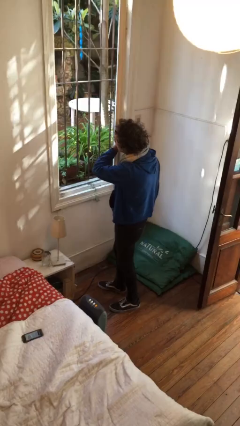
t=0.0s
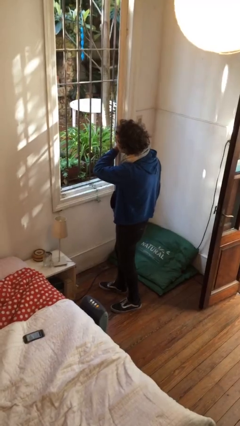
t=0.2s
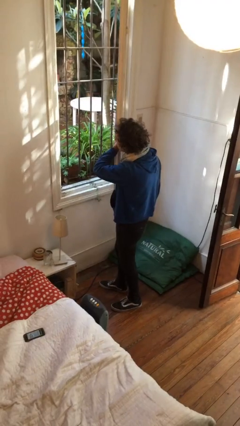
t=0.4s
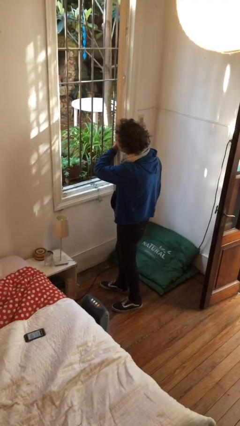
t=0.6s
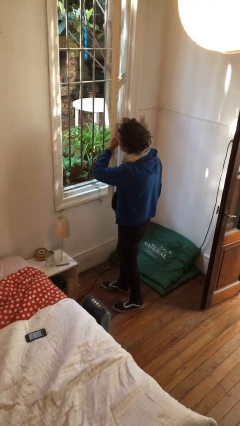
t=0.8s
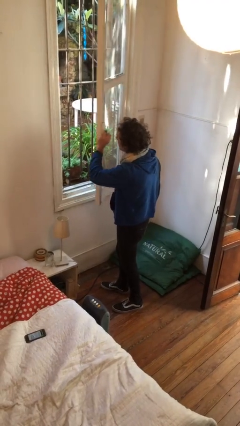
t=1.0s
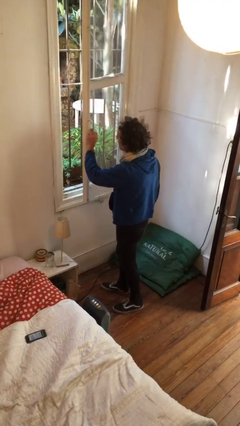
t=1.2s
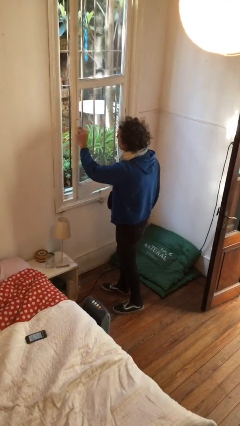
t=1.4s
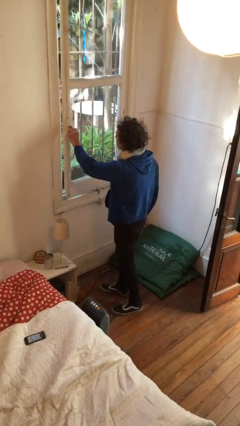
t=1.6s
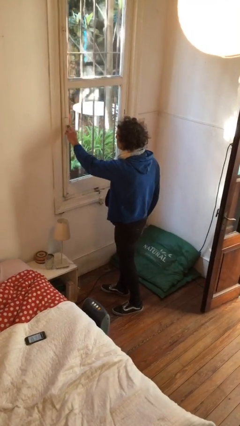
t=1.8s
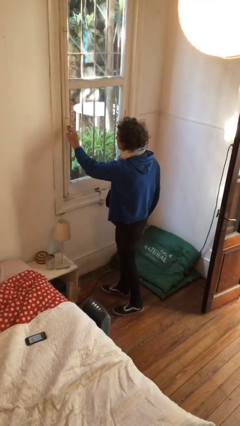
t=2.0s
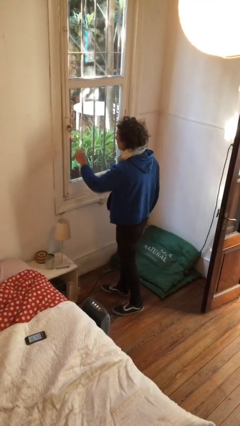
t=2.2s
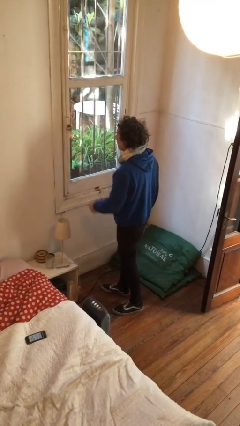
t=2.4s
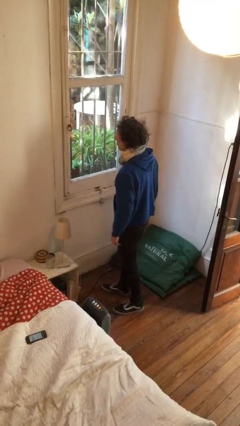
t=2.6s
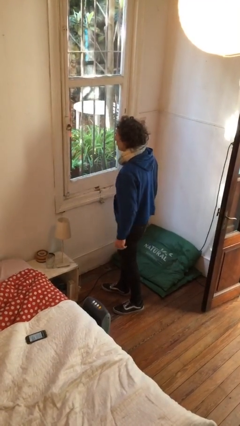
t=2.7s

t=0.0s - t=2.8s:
person closes home window

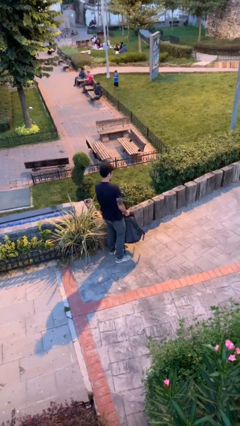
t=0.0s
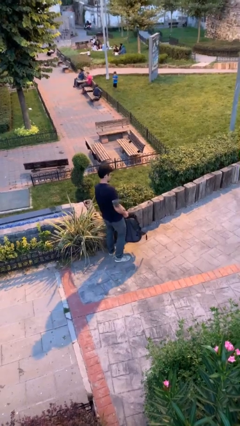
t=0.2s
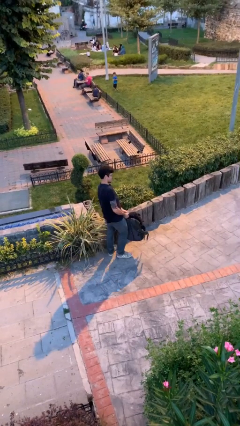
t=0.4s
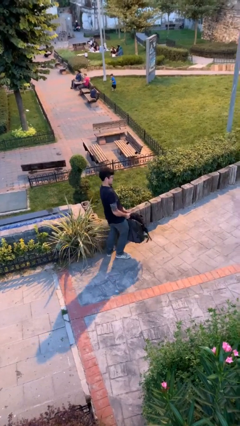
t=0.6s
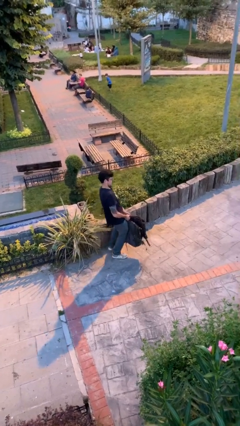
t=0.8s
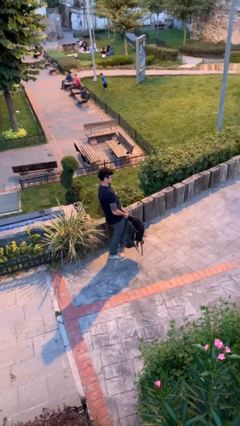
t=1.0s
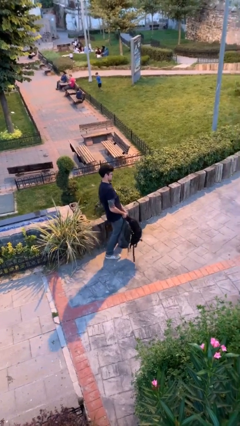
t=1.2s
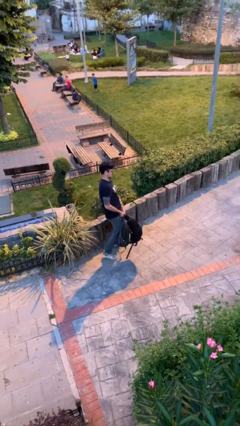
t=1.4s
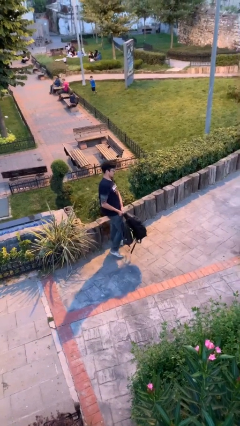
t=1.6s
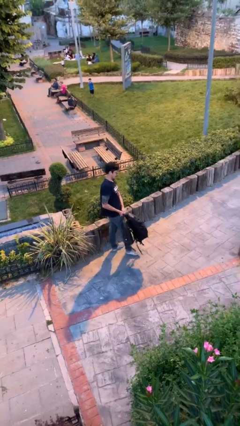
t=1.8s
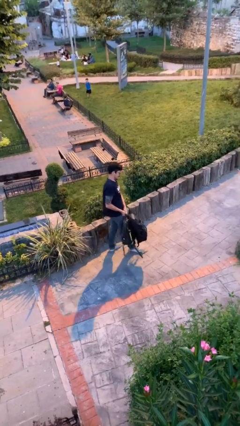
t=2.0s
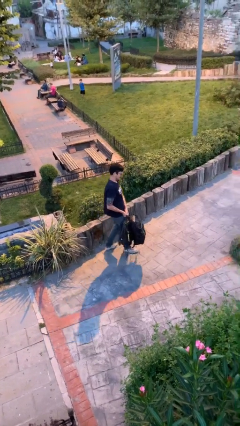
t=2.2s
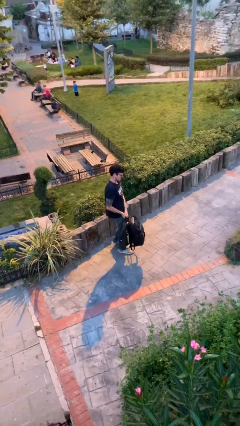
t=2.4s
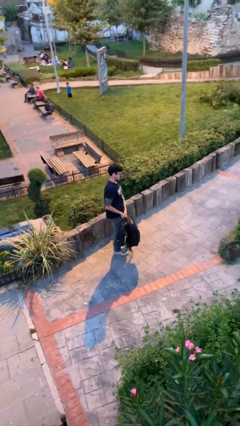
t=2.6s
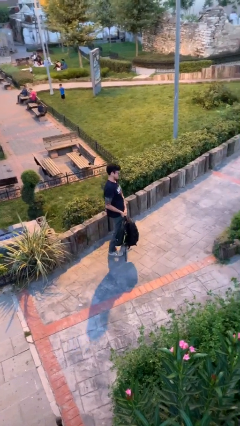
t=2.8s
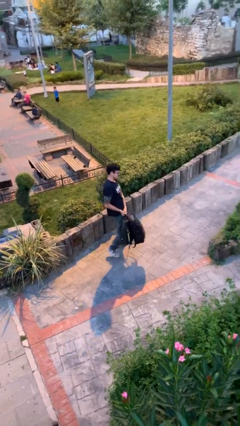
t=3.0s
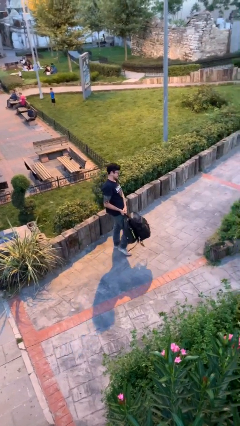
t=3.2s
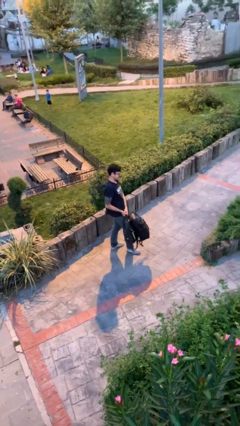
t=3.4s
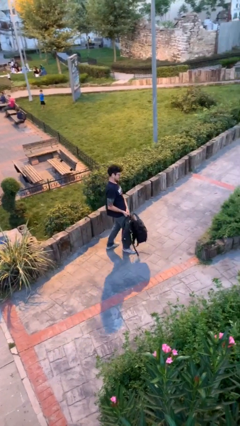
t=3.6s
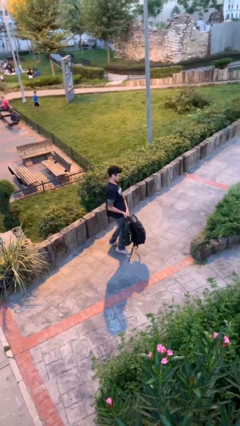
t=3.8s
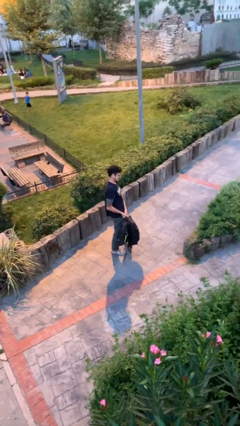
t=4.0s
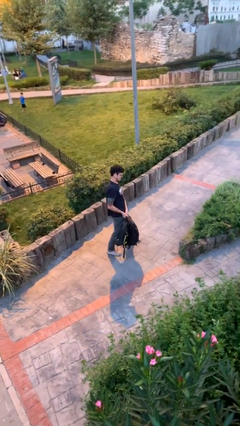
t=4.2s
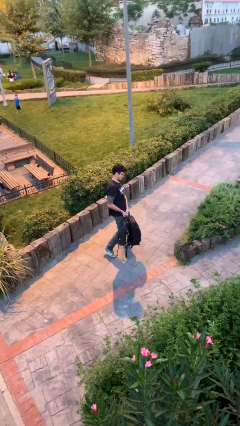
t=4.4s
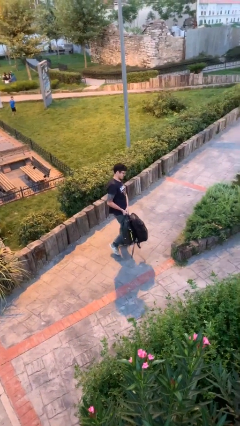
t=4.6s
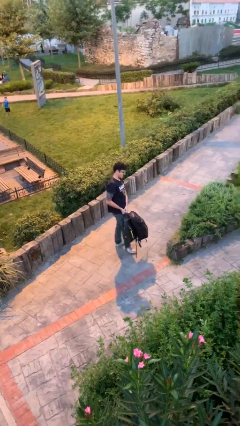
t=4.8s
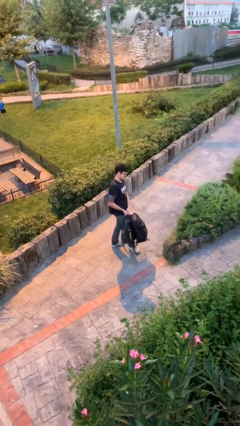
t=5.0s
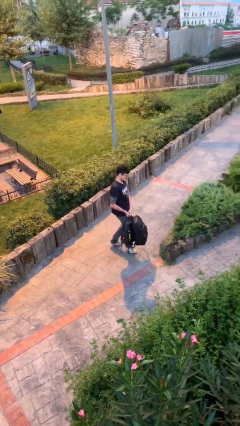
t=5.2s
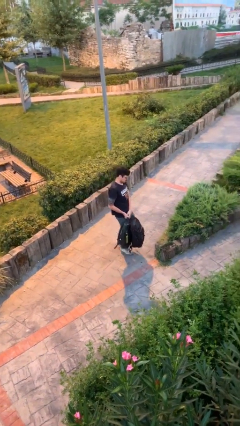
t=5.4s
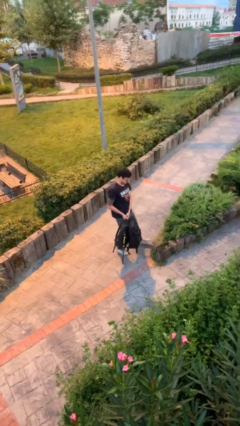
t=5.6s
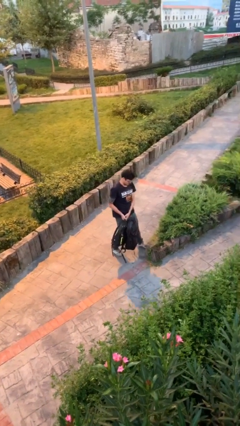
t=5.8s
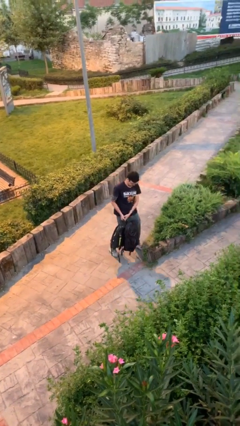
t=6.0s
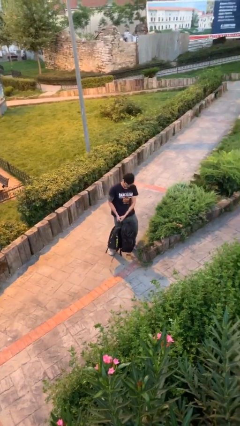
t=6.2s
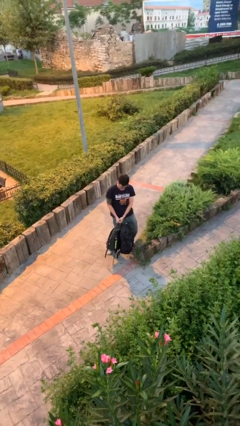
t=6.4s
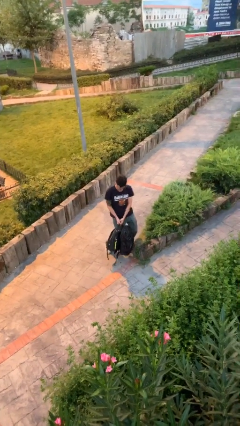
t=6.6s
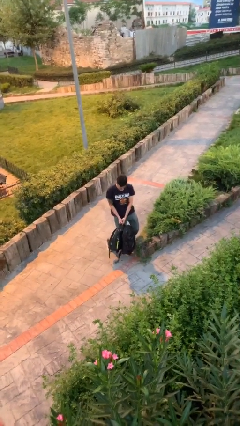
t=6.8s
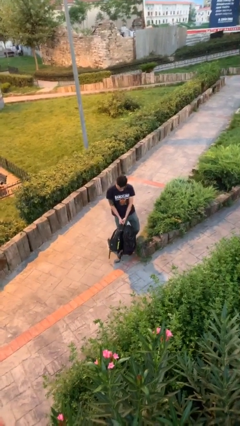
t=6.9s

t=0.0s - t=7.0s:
person carries heavy object

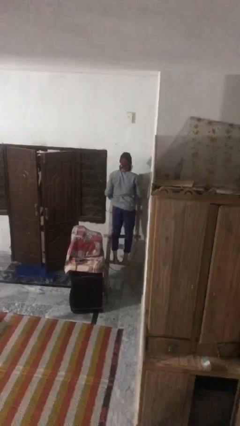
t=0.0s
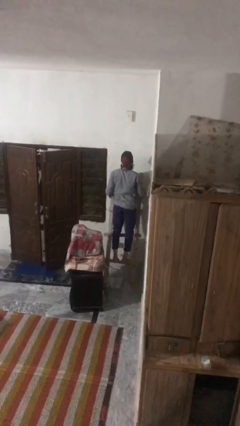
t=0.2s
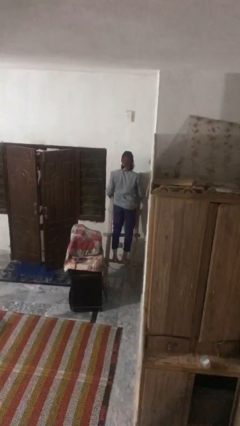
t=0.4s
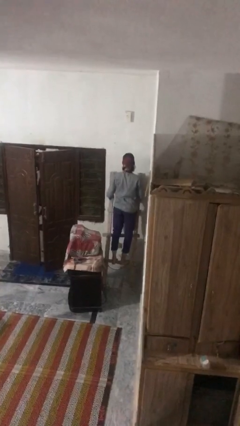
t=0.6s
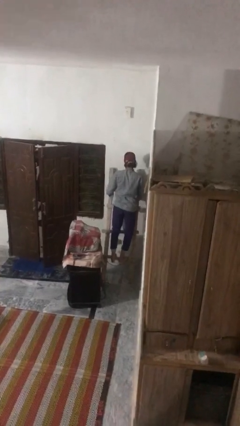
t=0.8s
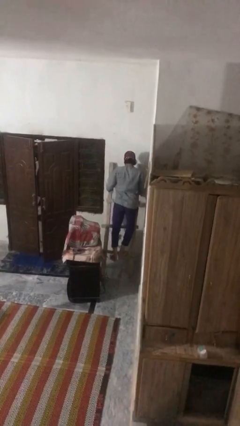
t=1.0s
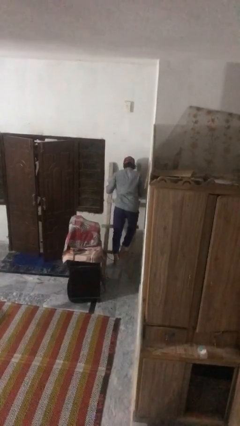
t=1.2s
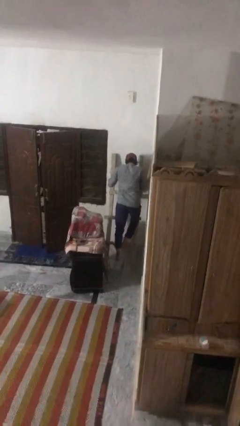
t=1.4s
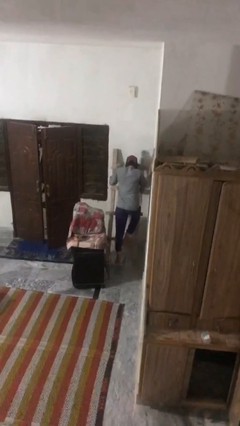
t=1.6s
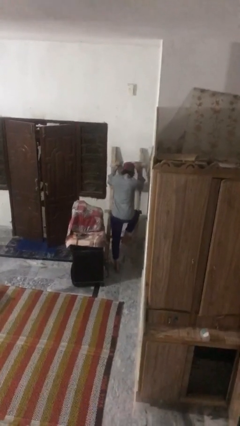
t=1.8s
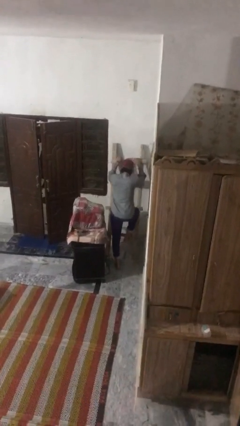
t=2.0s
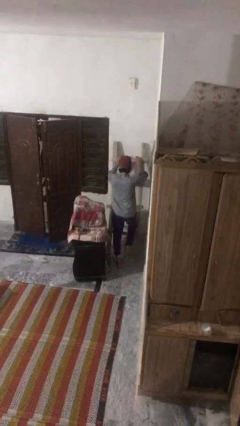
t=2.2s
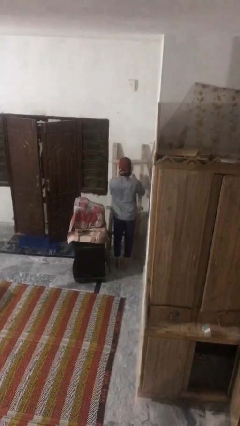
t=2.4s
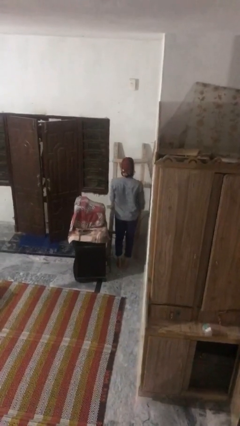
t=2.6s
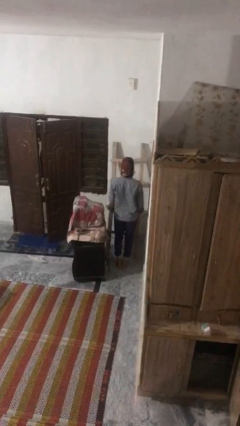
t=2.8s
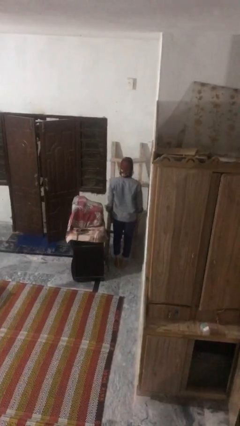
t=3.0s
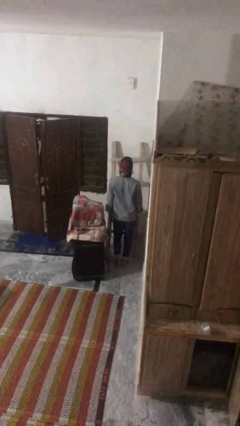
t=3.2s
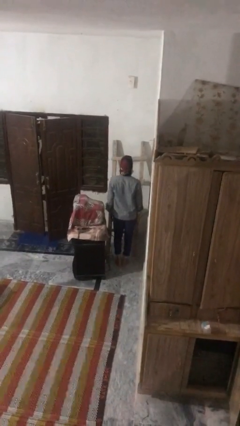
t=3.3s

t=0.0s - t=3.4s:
person climbs down ladder

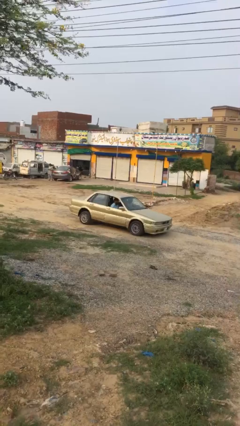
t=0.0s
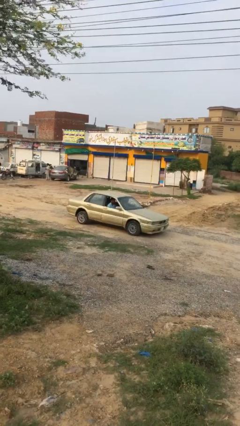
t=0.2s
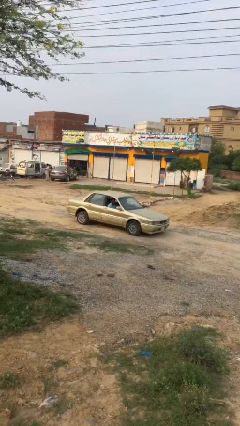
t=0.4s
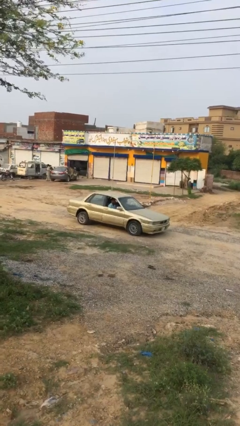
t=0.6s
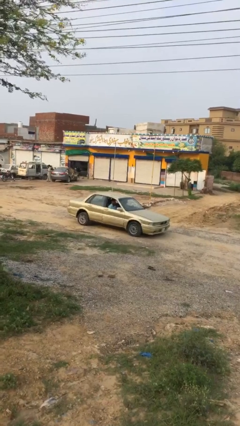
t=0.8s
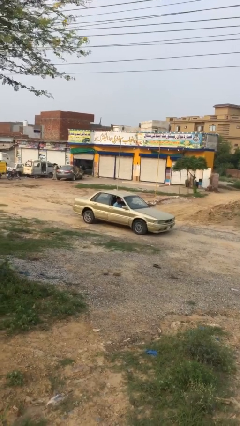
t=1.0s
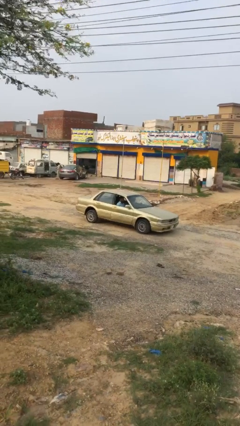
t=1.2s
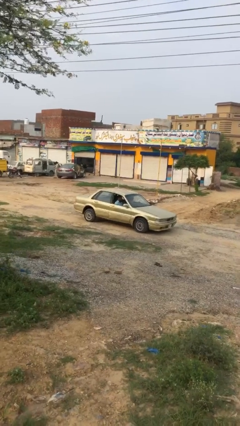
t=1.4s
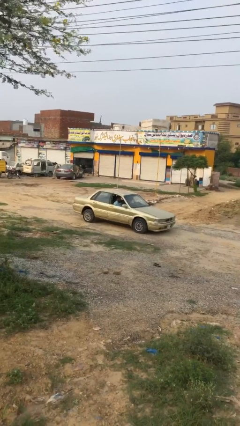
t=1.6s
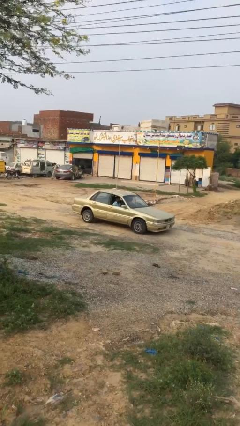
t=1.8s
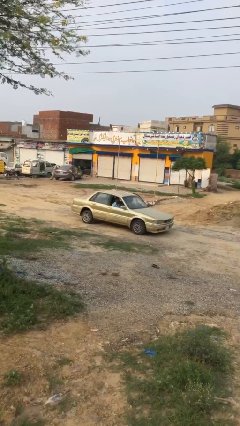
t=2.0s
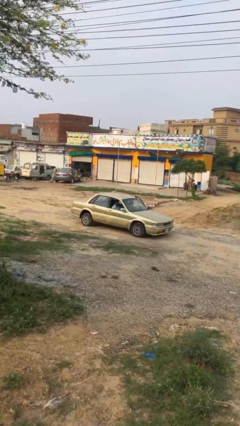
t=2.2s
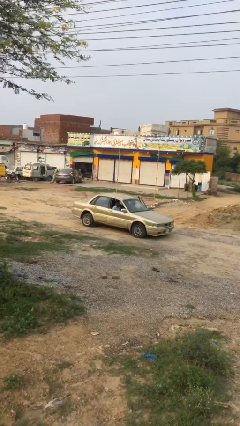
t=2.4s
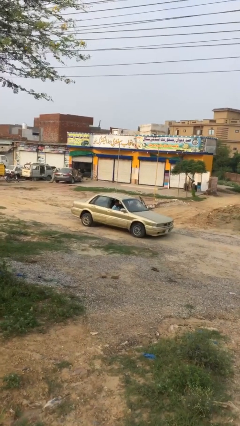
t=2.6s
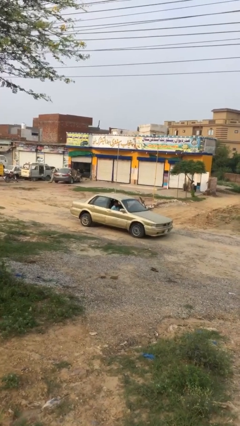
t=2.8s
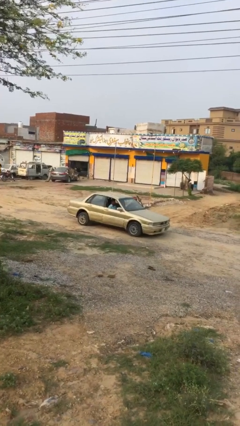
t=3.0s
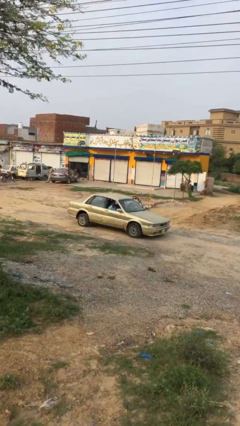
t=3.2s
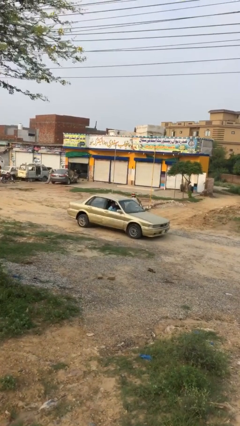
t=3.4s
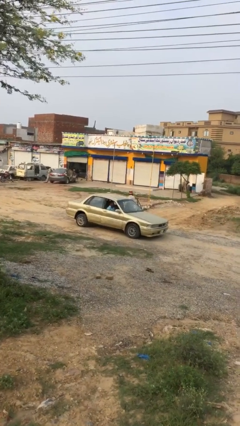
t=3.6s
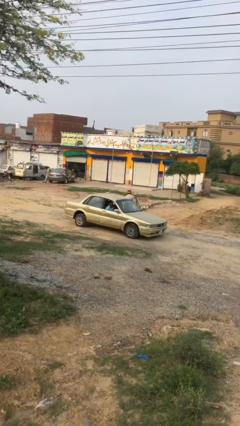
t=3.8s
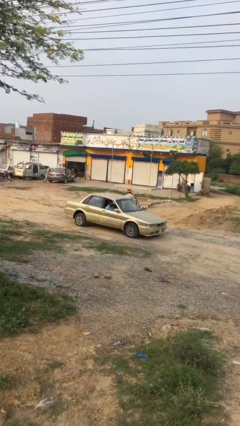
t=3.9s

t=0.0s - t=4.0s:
car drops off person

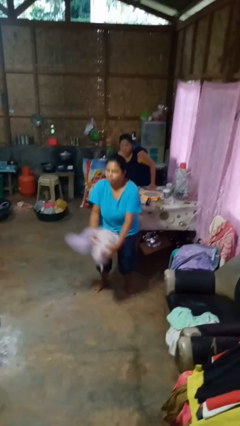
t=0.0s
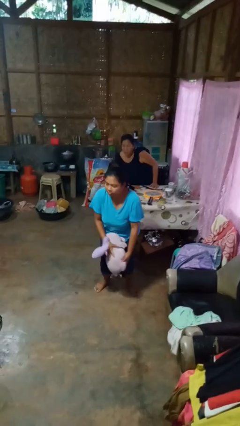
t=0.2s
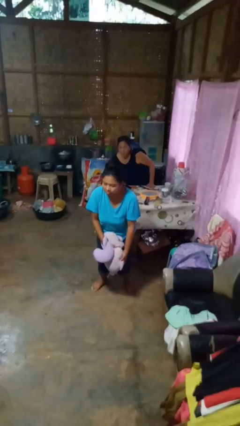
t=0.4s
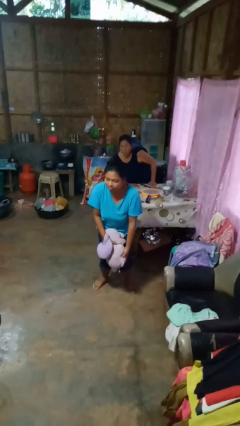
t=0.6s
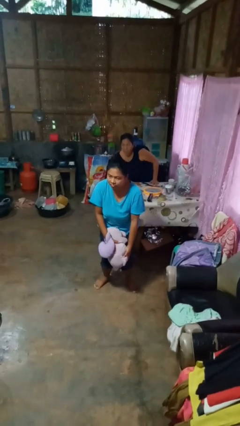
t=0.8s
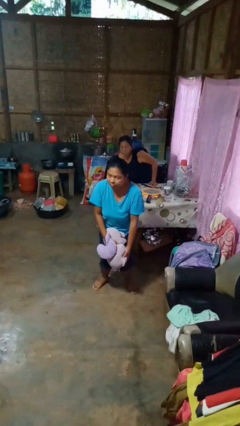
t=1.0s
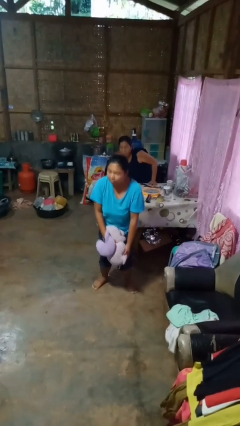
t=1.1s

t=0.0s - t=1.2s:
person catches dropped object
